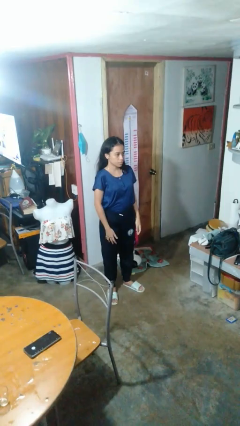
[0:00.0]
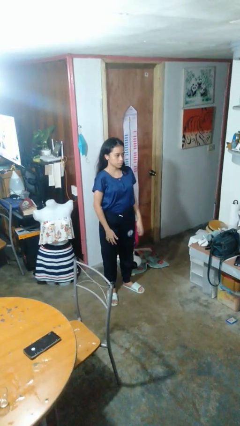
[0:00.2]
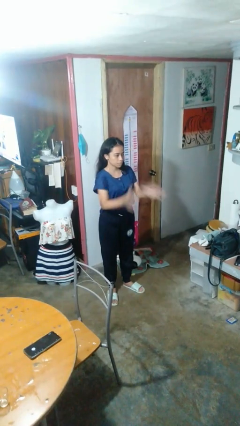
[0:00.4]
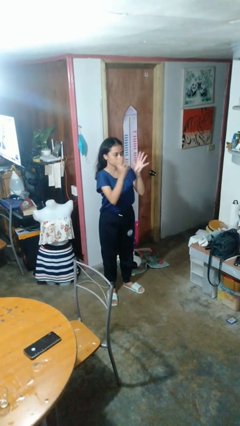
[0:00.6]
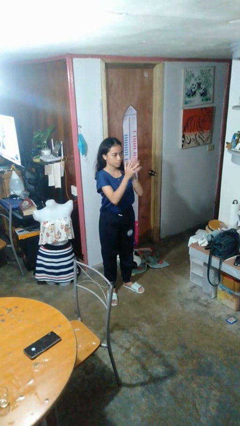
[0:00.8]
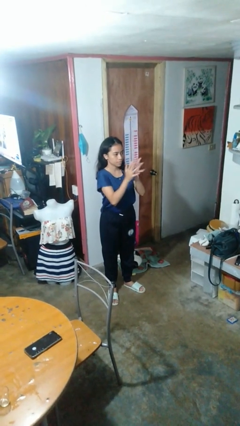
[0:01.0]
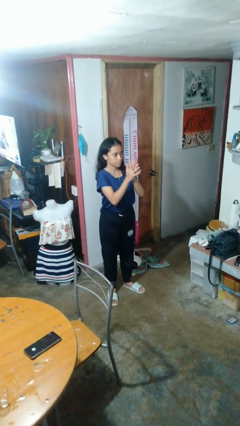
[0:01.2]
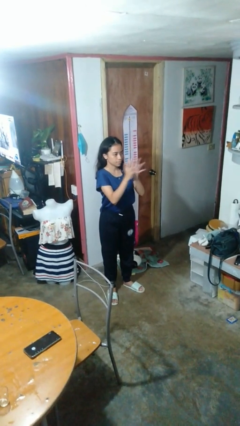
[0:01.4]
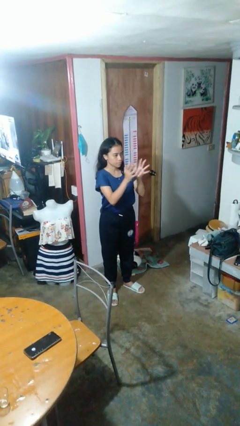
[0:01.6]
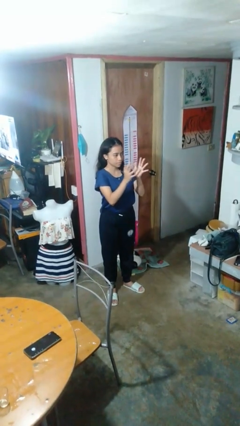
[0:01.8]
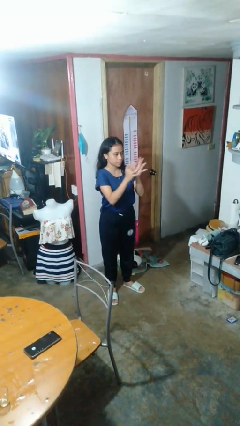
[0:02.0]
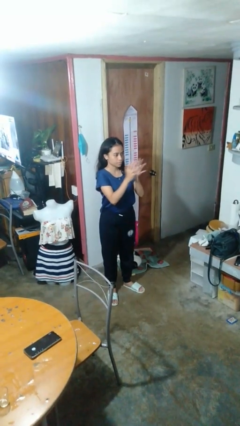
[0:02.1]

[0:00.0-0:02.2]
person claps hands

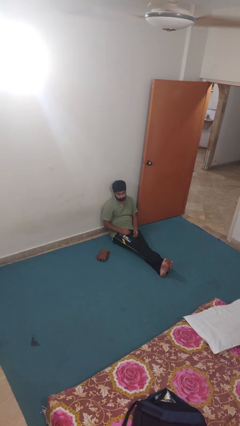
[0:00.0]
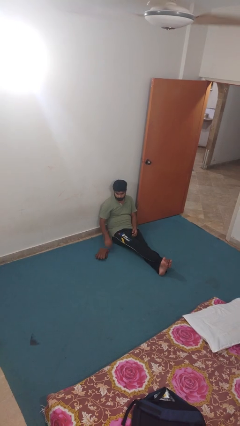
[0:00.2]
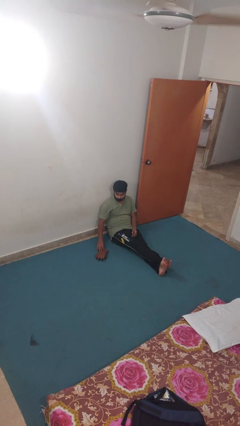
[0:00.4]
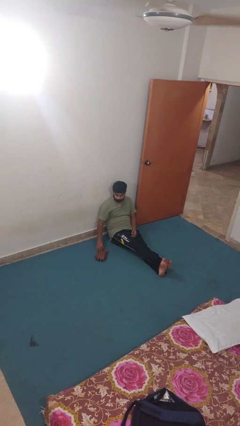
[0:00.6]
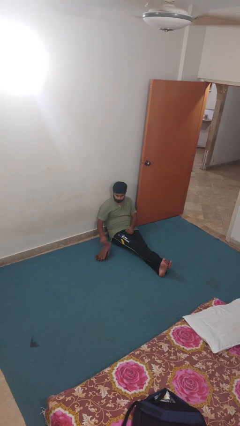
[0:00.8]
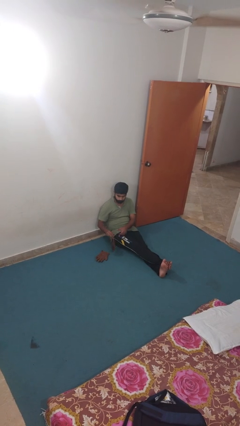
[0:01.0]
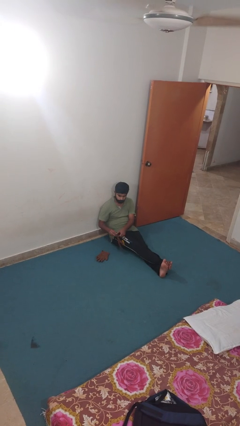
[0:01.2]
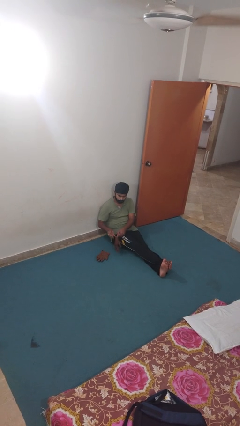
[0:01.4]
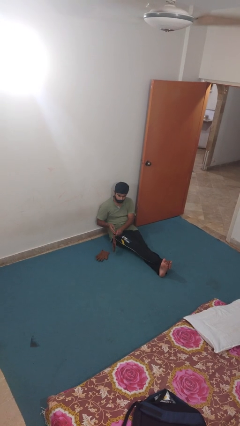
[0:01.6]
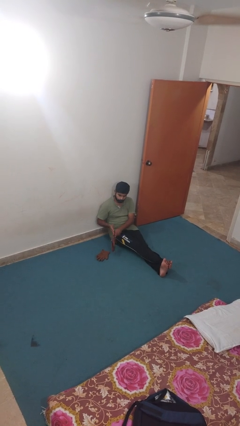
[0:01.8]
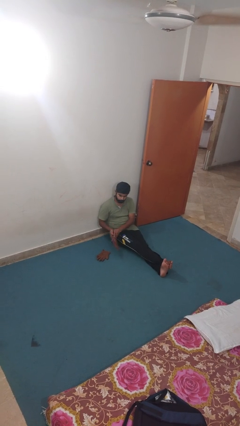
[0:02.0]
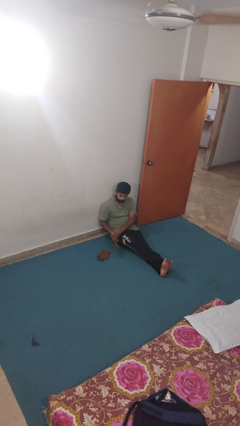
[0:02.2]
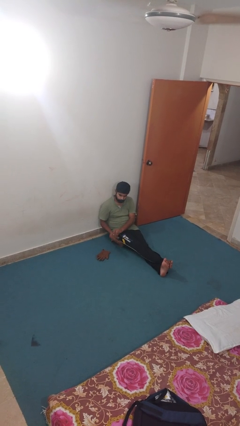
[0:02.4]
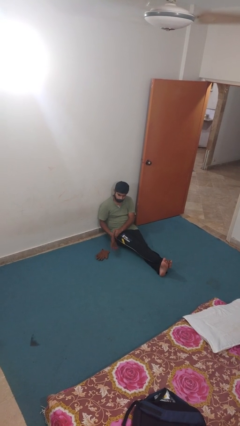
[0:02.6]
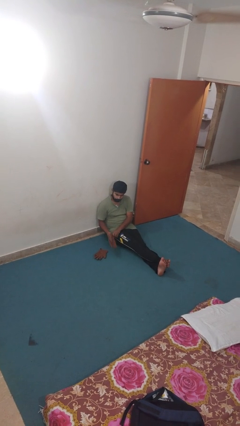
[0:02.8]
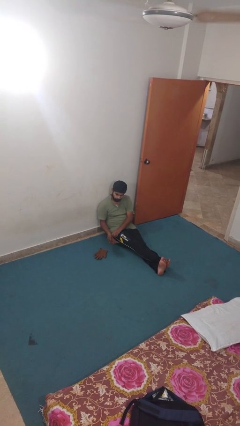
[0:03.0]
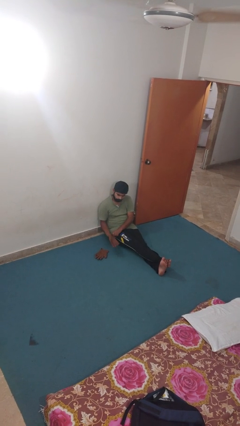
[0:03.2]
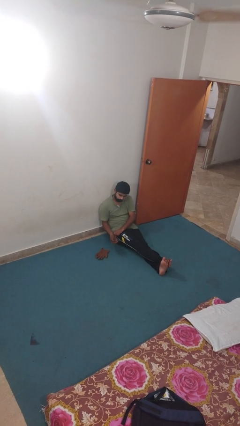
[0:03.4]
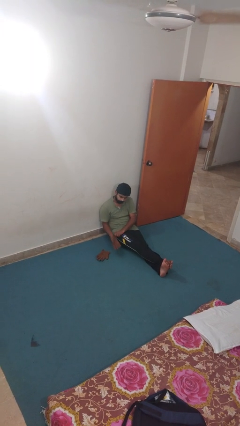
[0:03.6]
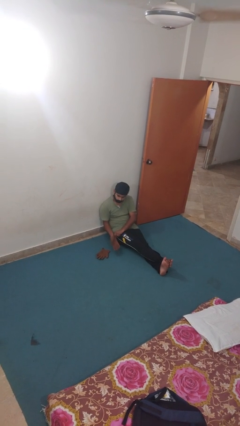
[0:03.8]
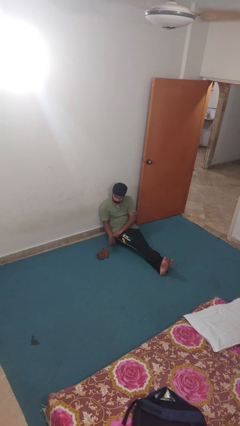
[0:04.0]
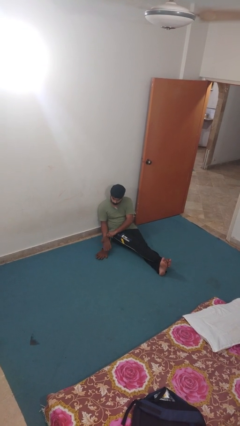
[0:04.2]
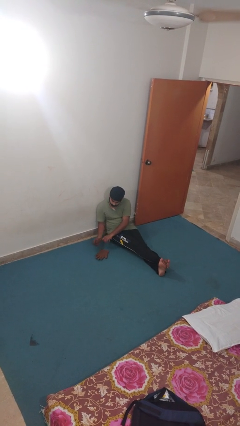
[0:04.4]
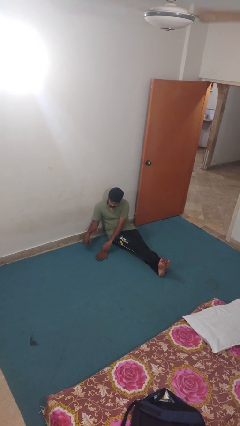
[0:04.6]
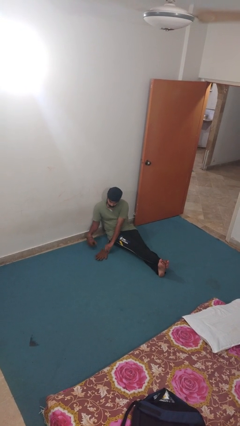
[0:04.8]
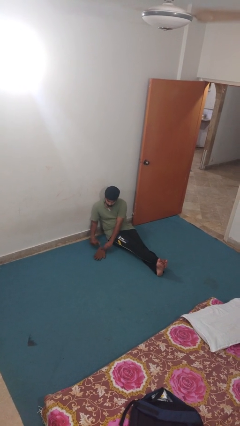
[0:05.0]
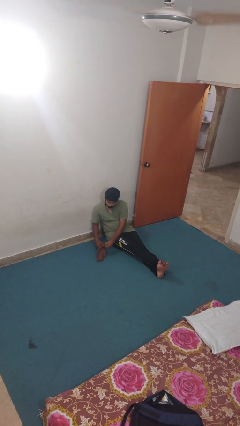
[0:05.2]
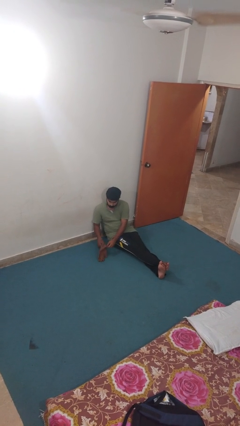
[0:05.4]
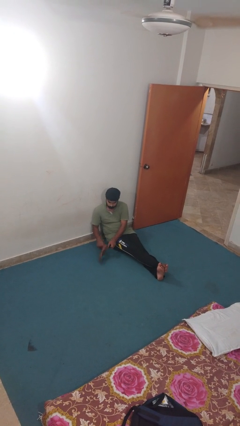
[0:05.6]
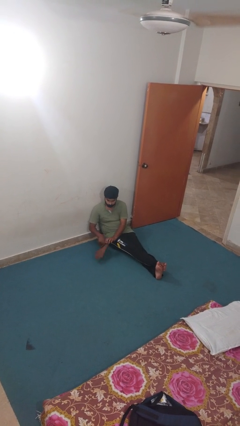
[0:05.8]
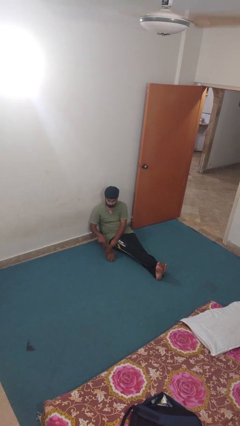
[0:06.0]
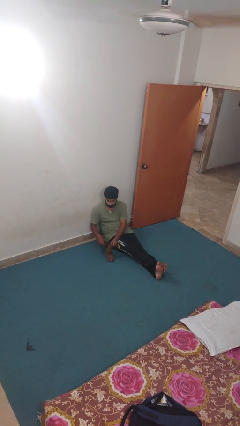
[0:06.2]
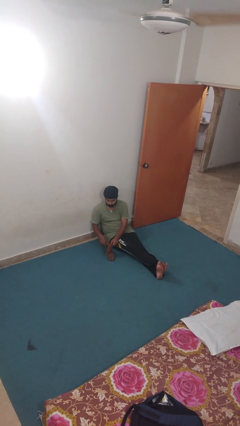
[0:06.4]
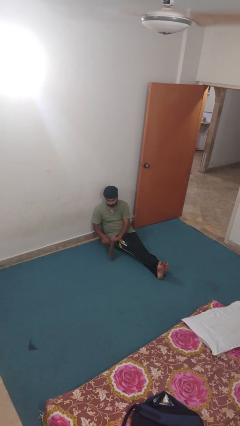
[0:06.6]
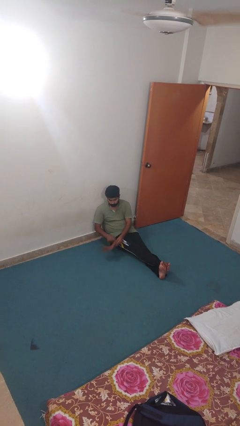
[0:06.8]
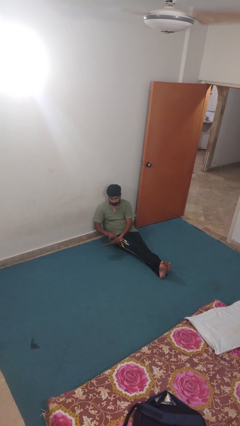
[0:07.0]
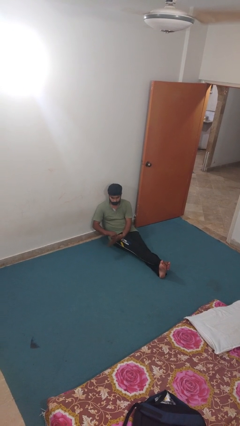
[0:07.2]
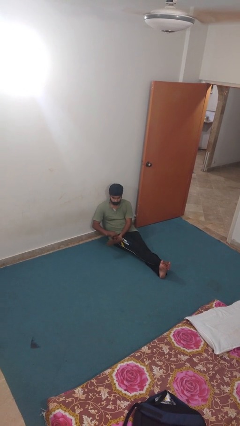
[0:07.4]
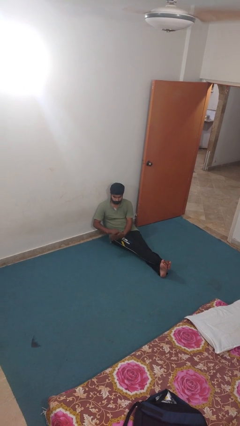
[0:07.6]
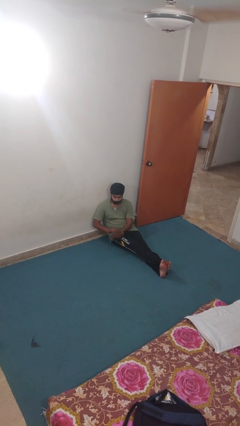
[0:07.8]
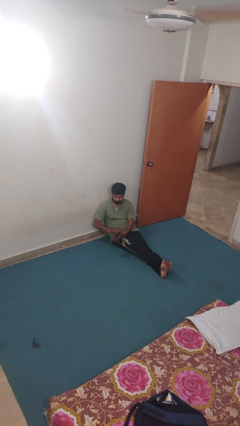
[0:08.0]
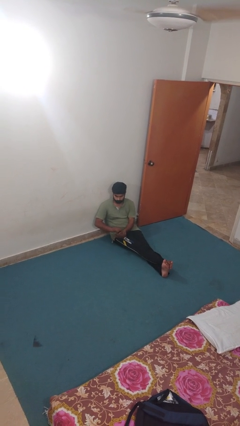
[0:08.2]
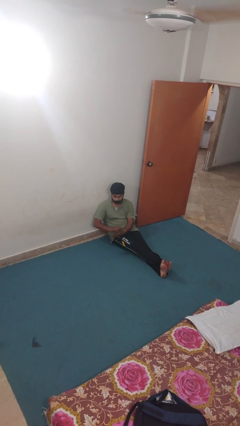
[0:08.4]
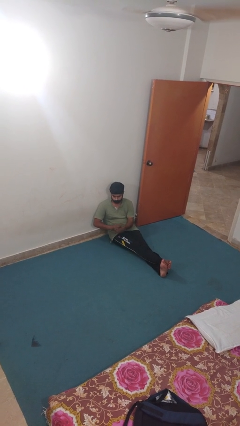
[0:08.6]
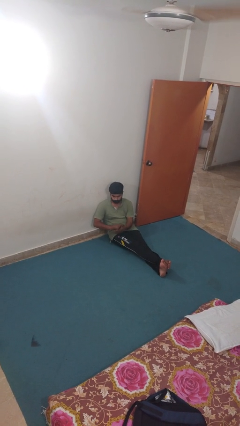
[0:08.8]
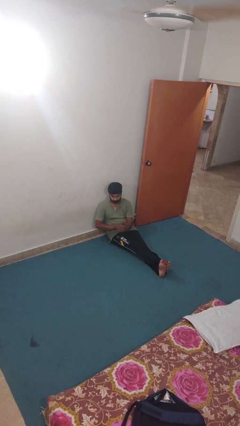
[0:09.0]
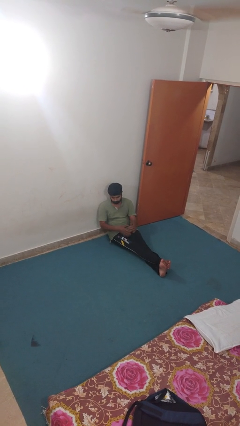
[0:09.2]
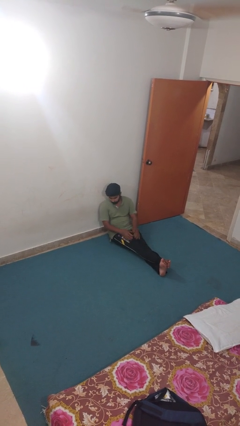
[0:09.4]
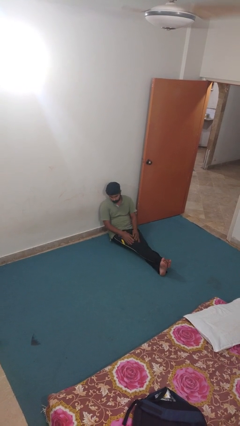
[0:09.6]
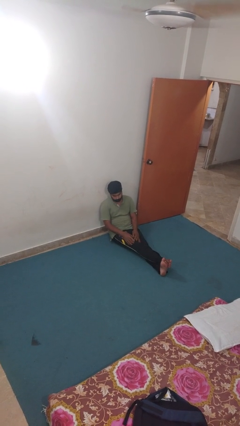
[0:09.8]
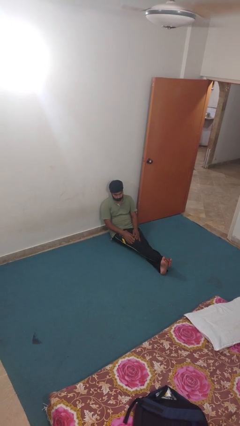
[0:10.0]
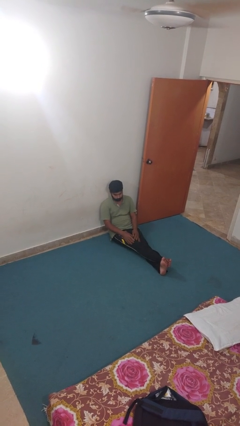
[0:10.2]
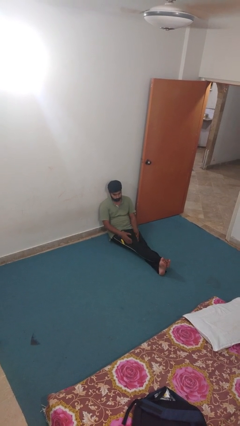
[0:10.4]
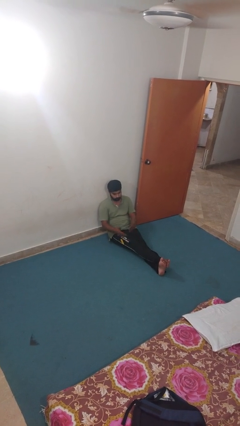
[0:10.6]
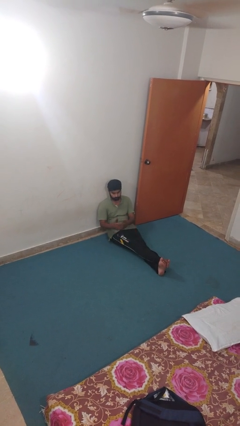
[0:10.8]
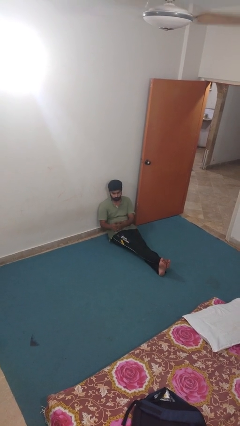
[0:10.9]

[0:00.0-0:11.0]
person puts on gloves

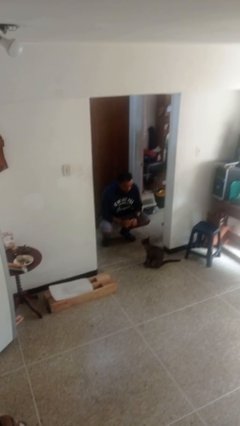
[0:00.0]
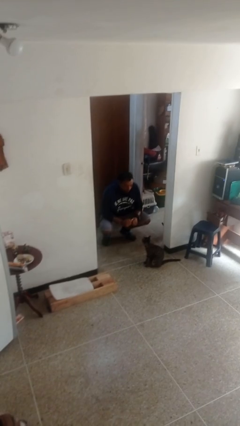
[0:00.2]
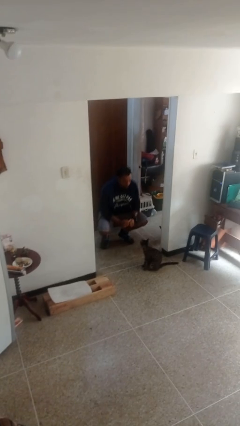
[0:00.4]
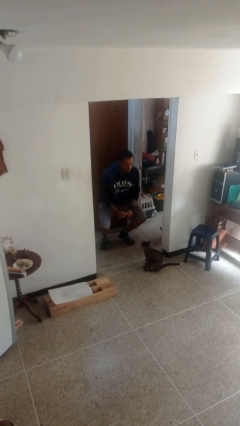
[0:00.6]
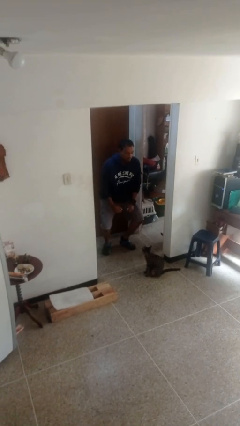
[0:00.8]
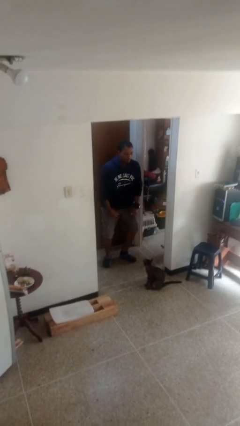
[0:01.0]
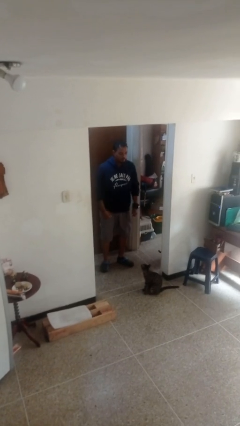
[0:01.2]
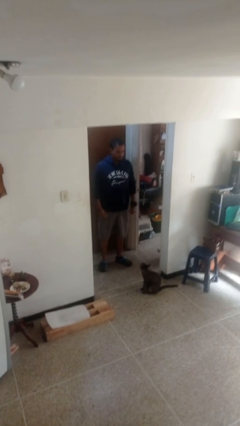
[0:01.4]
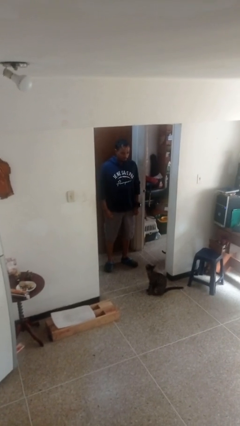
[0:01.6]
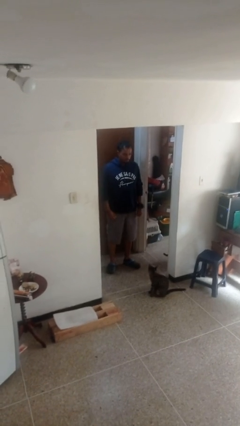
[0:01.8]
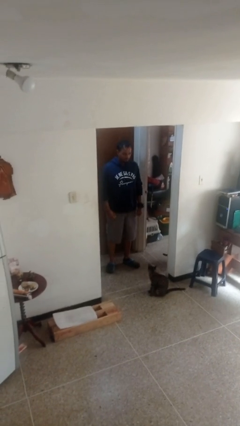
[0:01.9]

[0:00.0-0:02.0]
person stands up

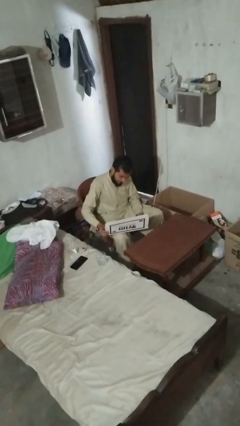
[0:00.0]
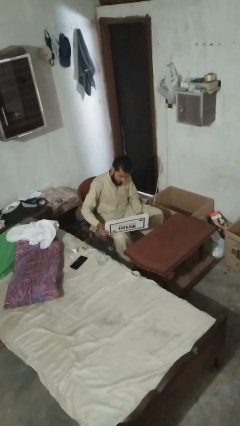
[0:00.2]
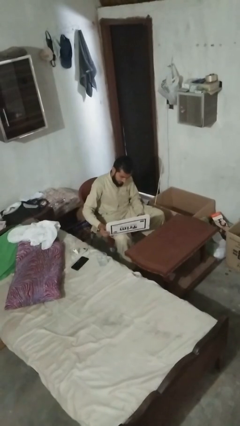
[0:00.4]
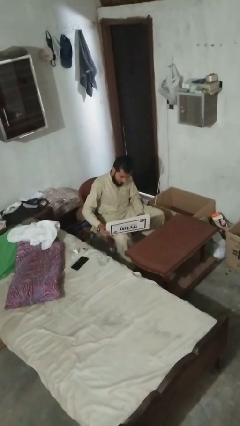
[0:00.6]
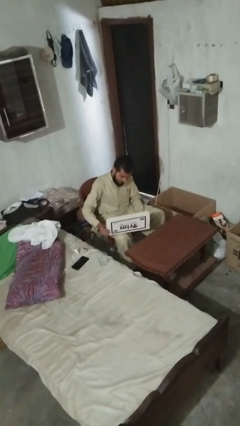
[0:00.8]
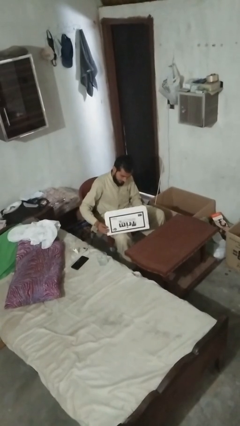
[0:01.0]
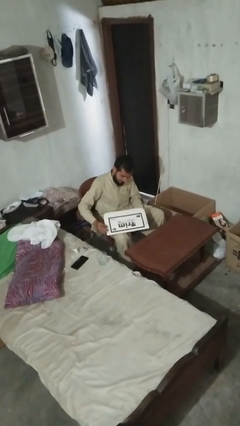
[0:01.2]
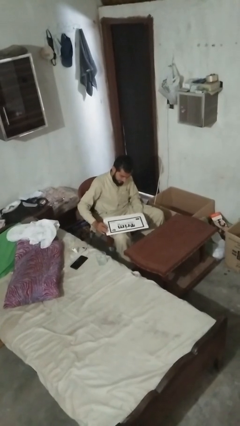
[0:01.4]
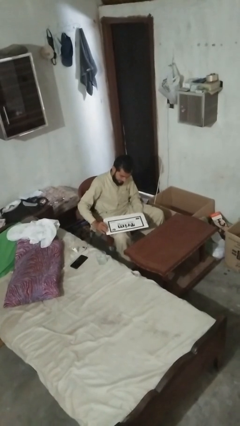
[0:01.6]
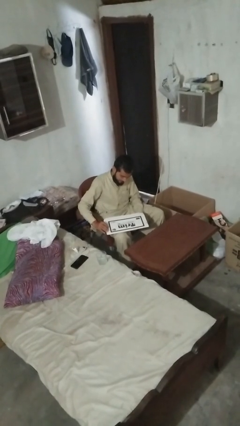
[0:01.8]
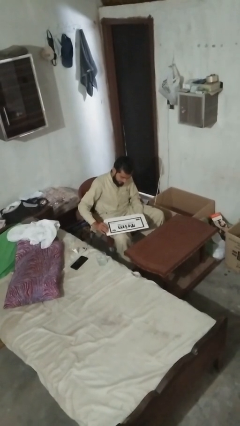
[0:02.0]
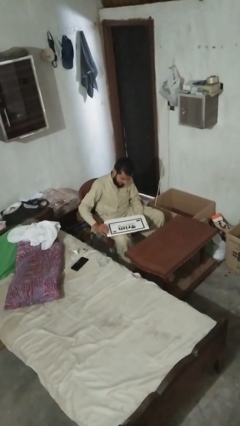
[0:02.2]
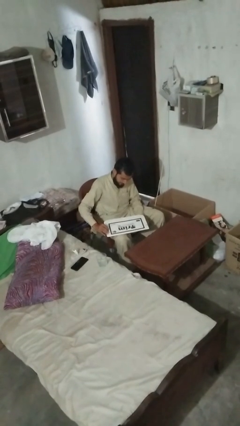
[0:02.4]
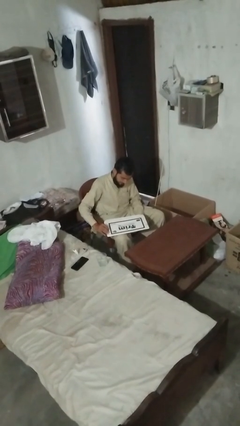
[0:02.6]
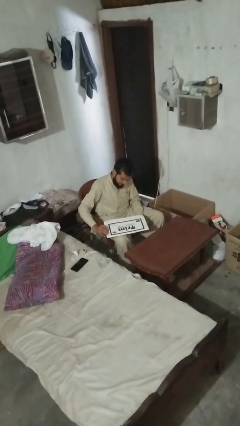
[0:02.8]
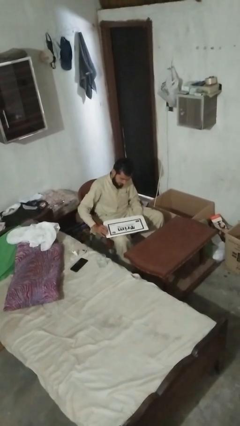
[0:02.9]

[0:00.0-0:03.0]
person closes laptop
